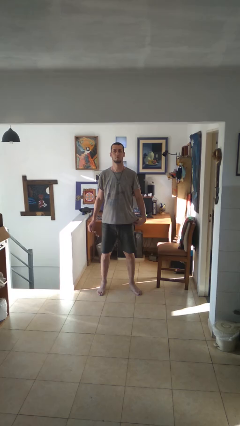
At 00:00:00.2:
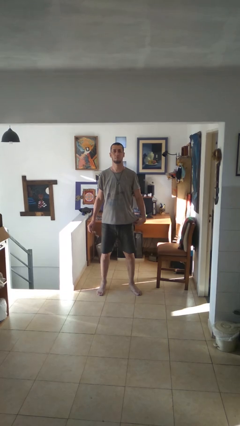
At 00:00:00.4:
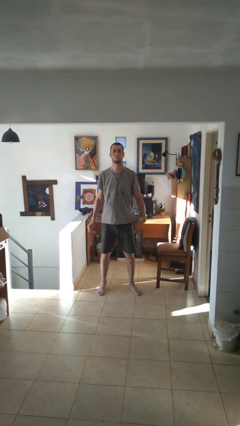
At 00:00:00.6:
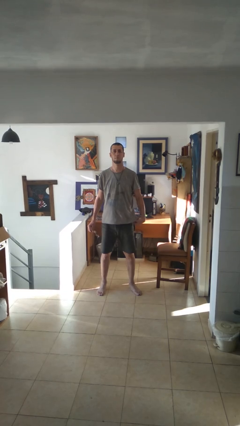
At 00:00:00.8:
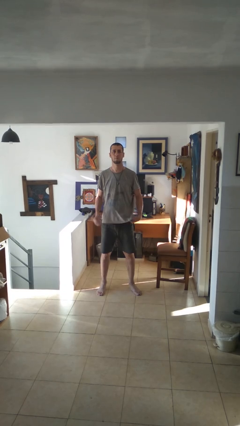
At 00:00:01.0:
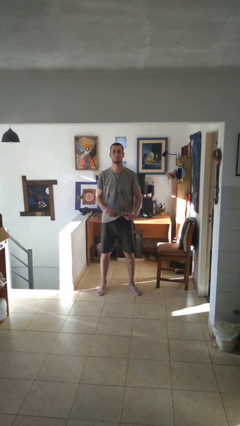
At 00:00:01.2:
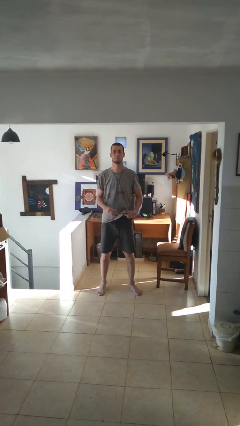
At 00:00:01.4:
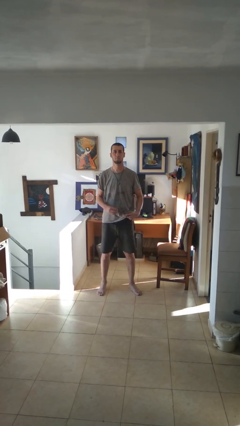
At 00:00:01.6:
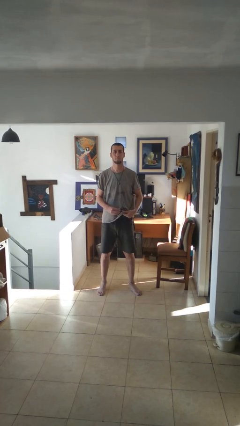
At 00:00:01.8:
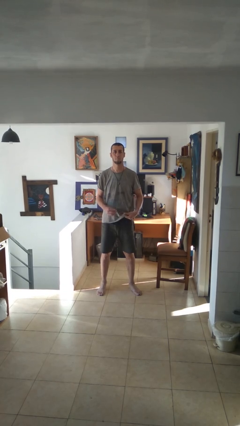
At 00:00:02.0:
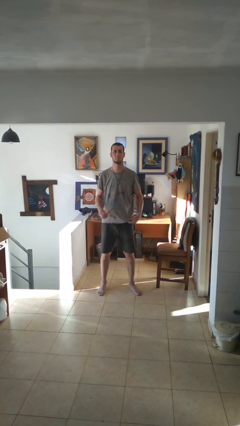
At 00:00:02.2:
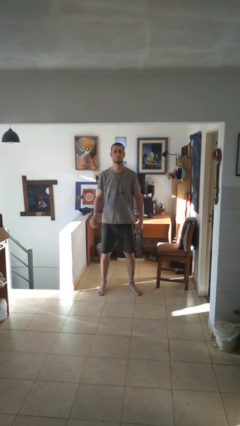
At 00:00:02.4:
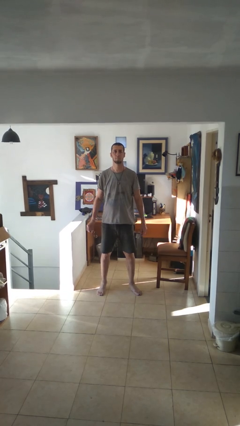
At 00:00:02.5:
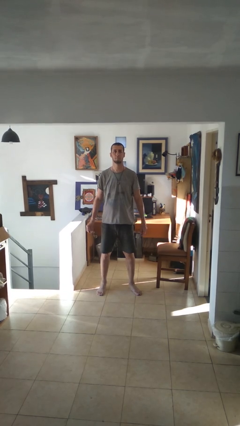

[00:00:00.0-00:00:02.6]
person cleans eyeglasses

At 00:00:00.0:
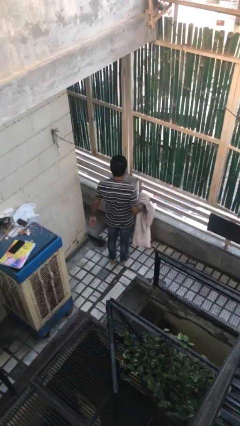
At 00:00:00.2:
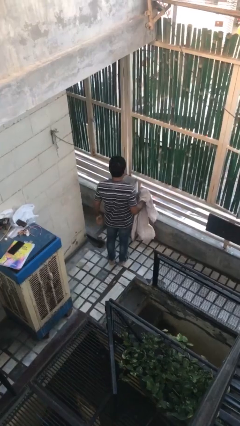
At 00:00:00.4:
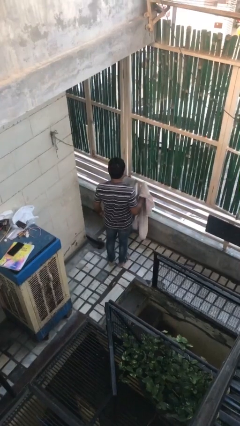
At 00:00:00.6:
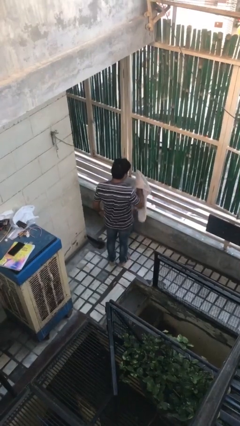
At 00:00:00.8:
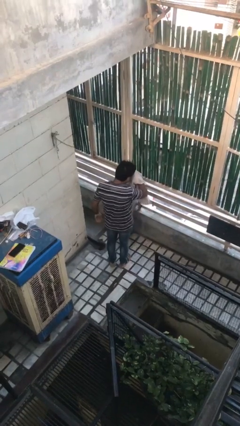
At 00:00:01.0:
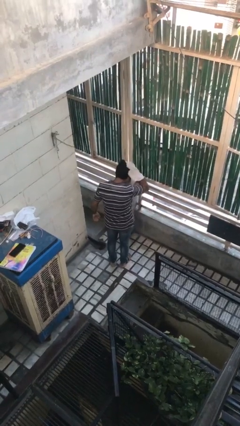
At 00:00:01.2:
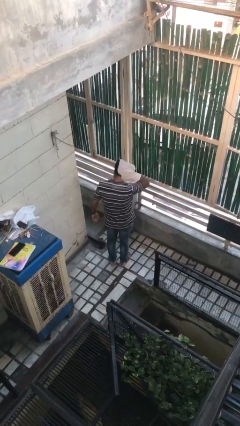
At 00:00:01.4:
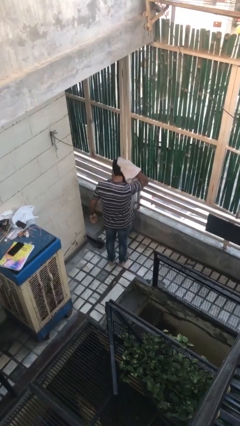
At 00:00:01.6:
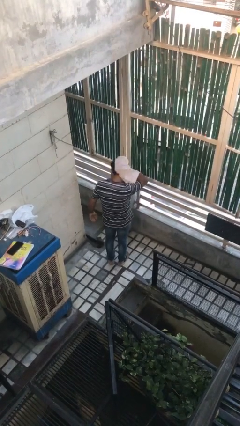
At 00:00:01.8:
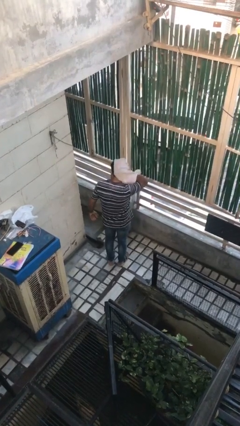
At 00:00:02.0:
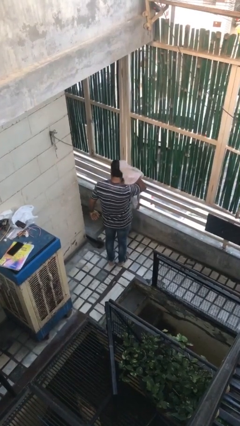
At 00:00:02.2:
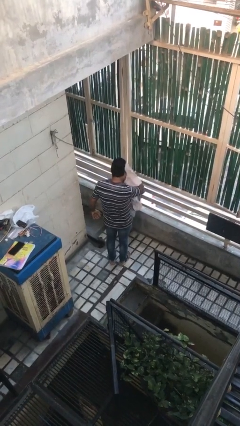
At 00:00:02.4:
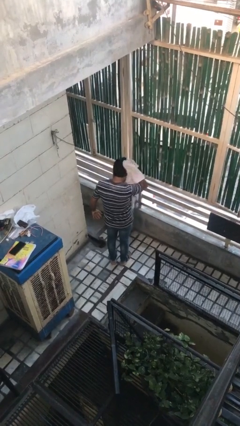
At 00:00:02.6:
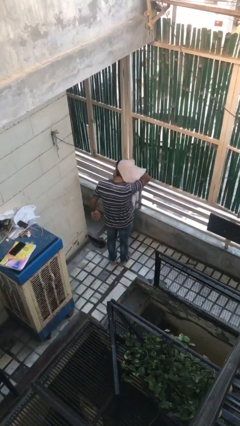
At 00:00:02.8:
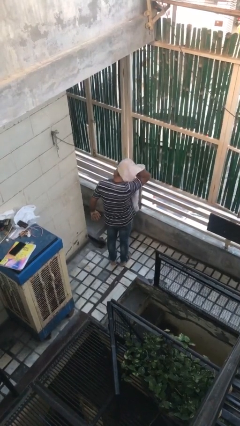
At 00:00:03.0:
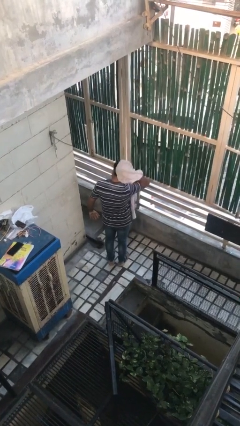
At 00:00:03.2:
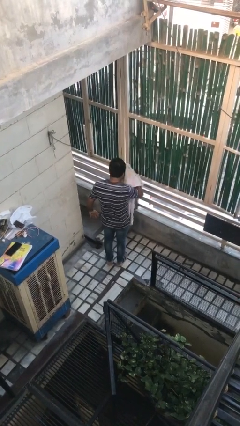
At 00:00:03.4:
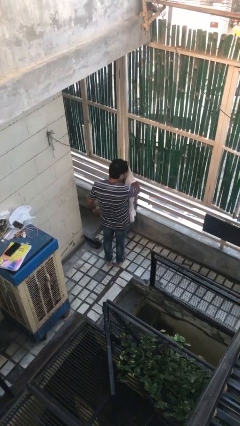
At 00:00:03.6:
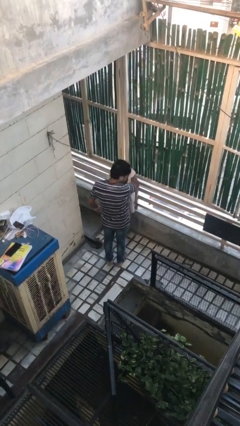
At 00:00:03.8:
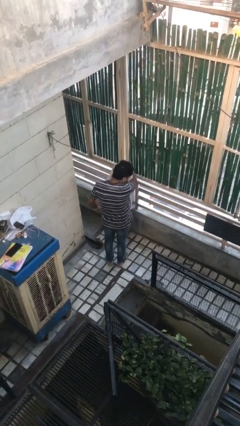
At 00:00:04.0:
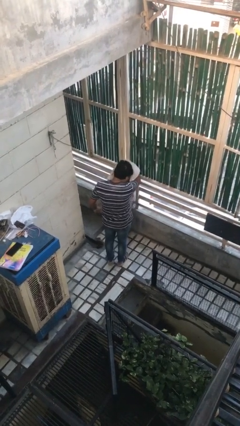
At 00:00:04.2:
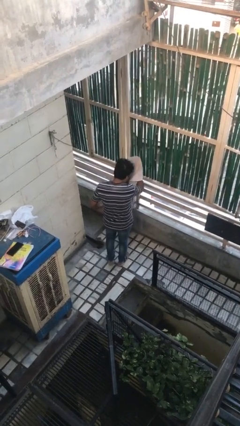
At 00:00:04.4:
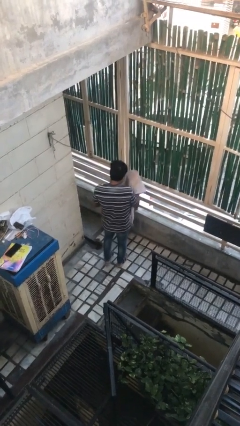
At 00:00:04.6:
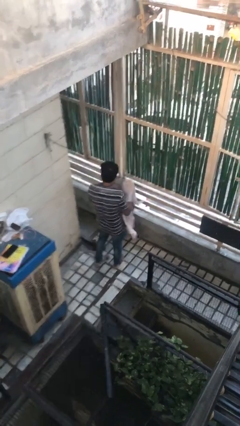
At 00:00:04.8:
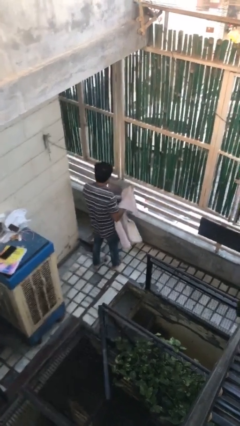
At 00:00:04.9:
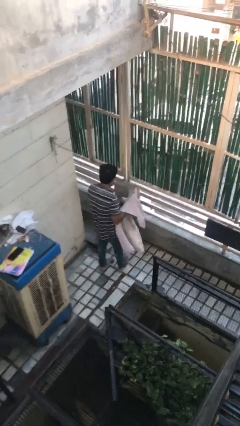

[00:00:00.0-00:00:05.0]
person dries hair with towel

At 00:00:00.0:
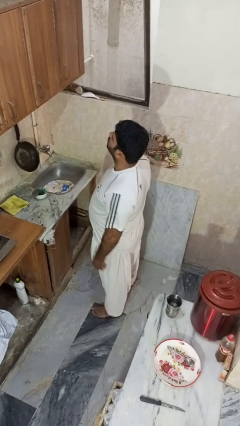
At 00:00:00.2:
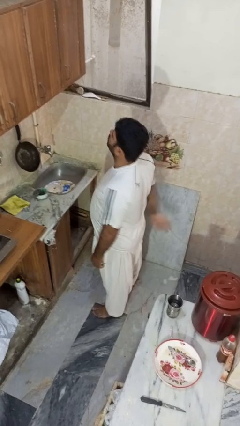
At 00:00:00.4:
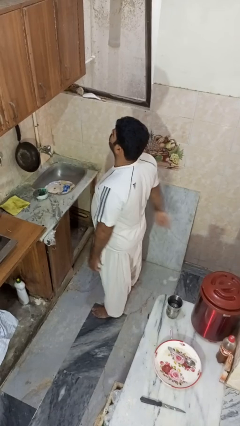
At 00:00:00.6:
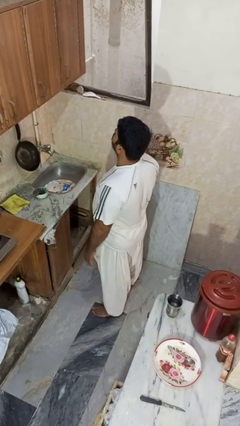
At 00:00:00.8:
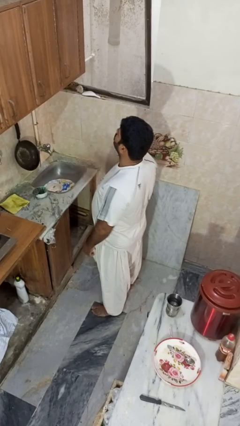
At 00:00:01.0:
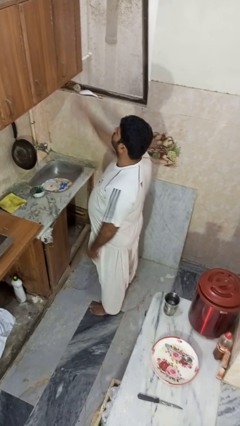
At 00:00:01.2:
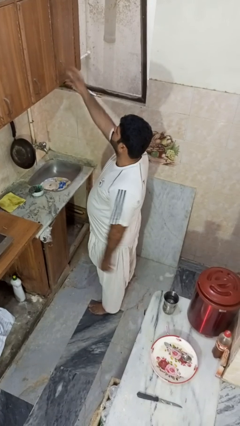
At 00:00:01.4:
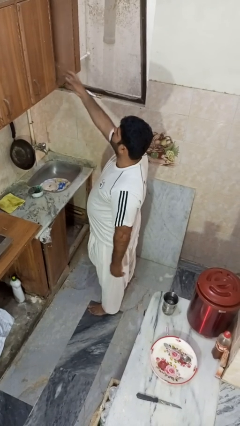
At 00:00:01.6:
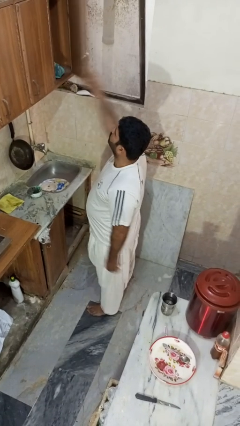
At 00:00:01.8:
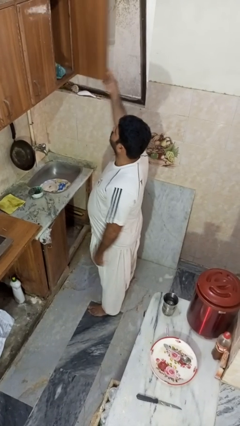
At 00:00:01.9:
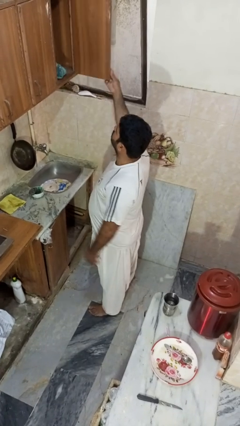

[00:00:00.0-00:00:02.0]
person opens cabinet

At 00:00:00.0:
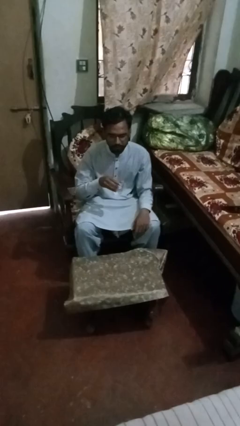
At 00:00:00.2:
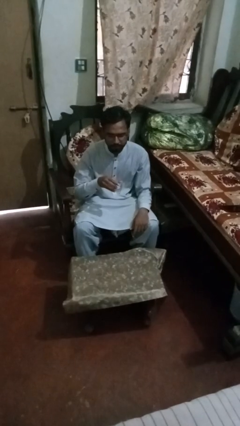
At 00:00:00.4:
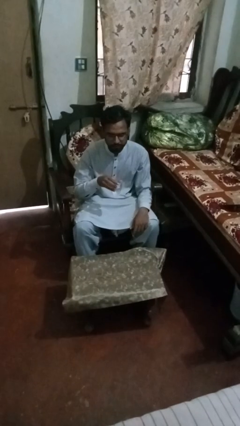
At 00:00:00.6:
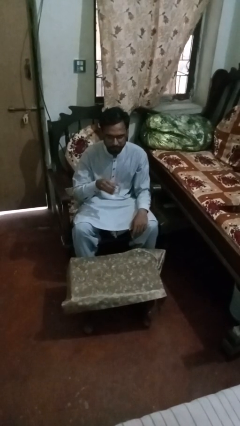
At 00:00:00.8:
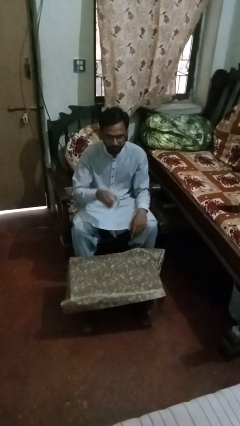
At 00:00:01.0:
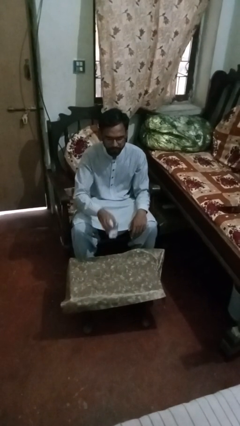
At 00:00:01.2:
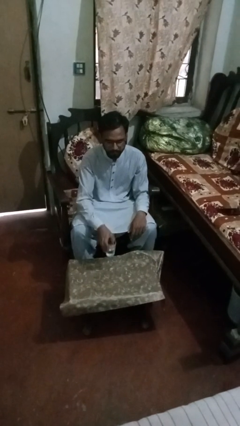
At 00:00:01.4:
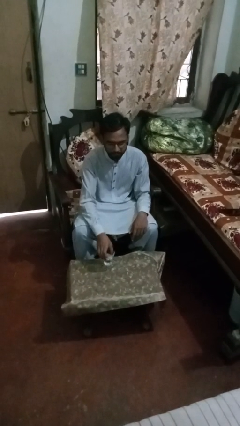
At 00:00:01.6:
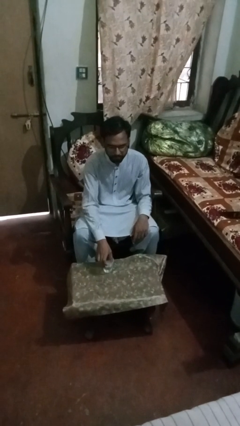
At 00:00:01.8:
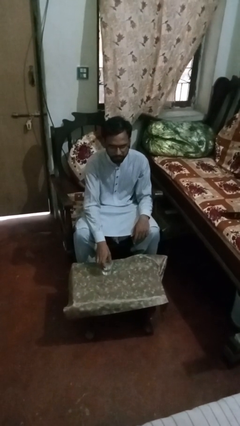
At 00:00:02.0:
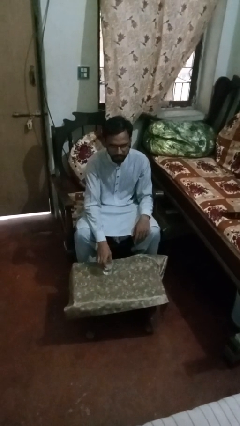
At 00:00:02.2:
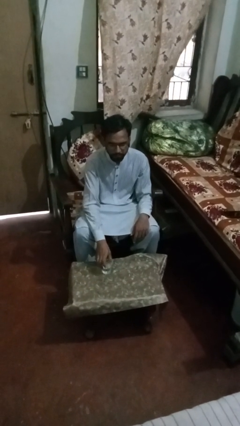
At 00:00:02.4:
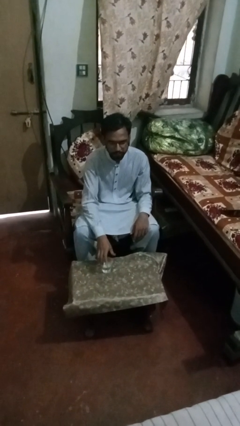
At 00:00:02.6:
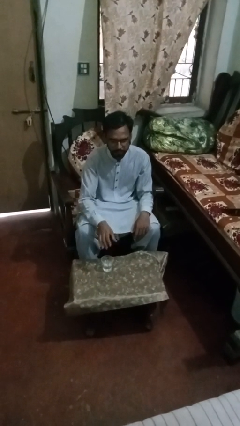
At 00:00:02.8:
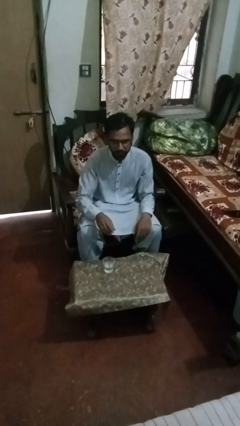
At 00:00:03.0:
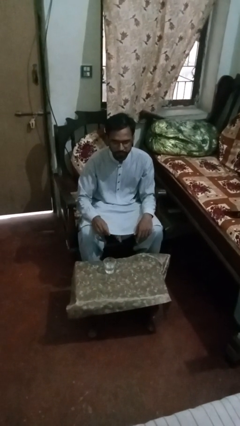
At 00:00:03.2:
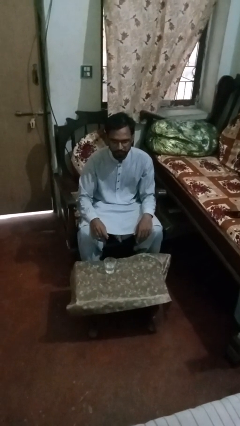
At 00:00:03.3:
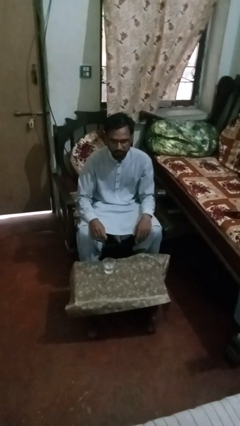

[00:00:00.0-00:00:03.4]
person puts down object on table

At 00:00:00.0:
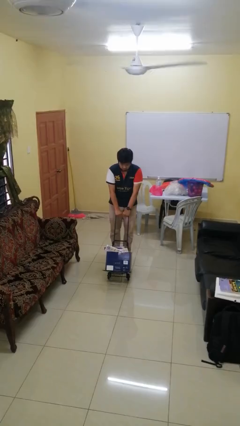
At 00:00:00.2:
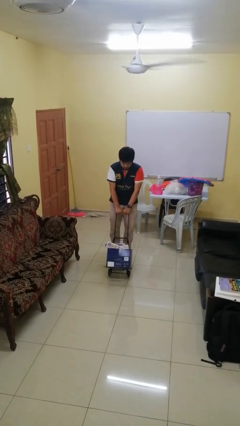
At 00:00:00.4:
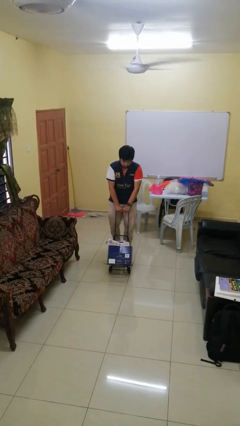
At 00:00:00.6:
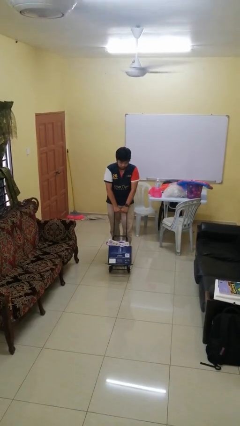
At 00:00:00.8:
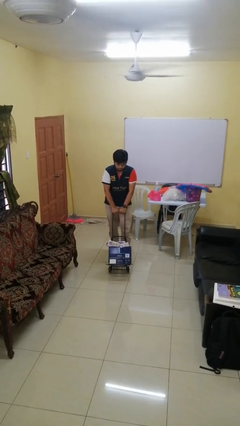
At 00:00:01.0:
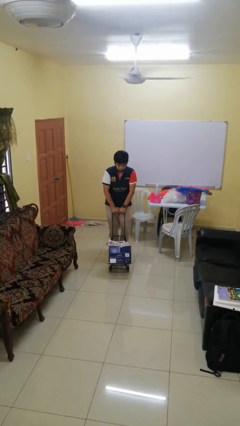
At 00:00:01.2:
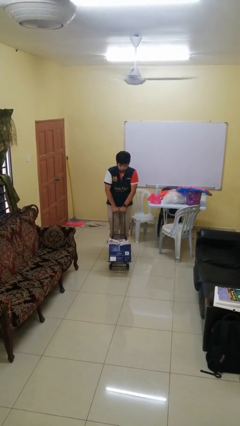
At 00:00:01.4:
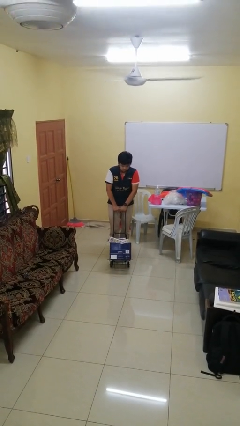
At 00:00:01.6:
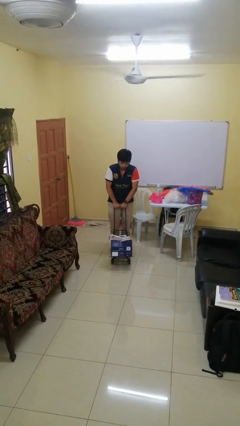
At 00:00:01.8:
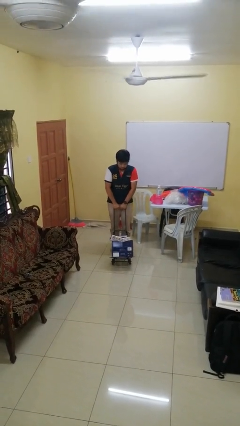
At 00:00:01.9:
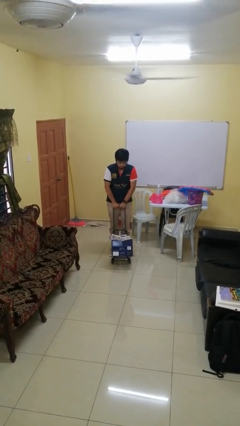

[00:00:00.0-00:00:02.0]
person pulls wheeled cart

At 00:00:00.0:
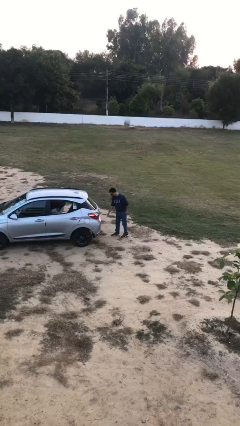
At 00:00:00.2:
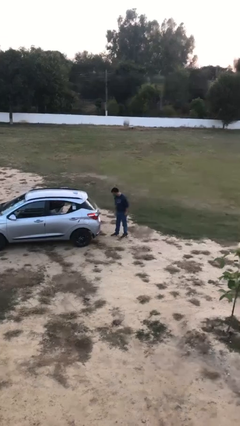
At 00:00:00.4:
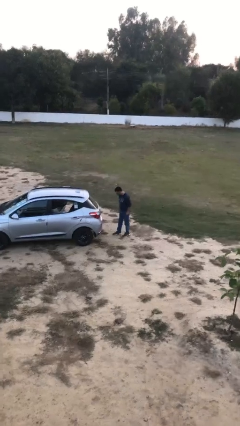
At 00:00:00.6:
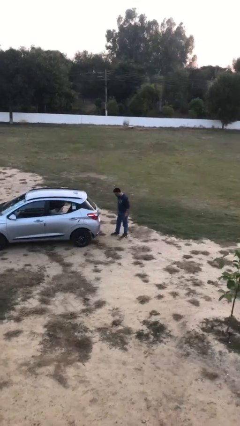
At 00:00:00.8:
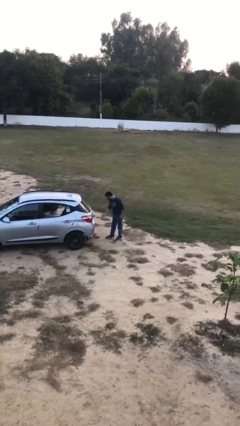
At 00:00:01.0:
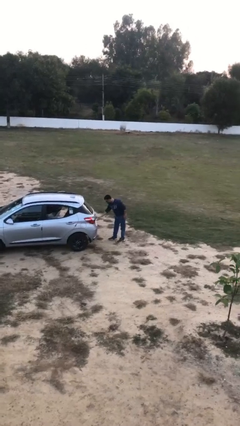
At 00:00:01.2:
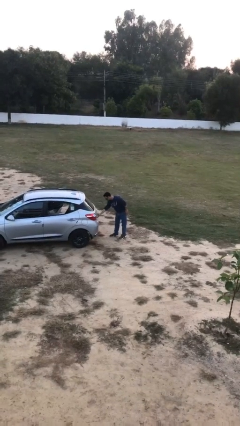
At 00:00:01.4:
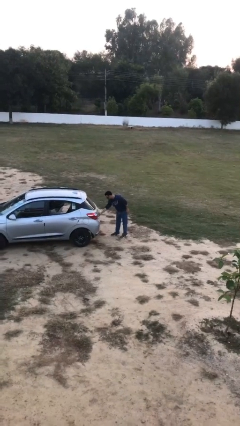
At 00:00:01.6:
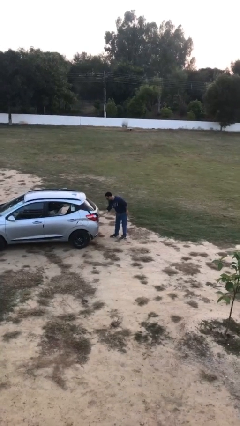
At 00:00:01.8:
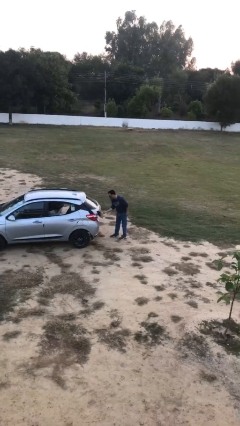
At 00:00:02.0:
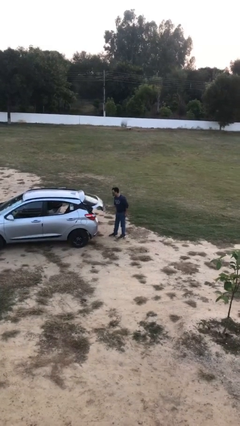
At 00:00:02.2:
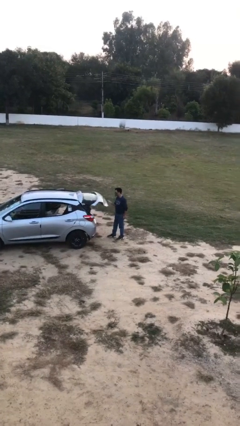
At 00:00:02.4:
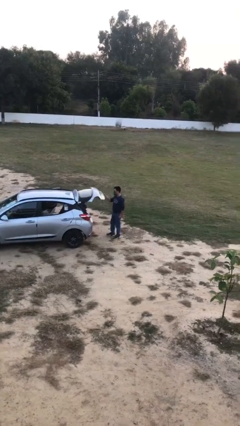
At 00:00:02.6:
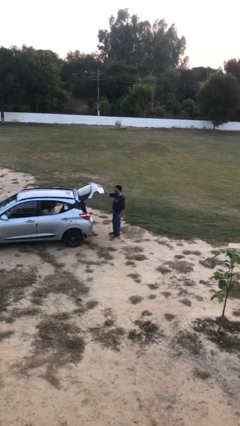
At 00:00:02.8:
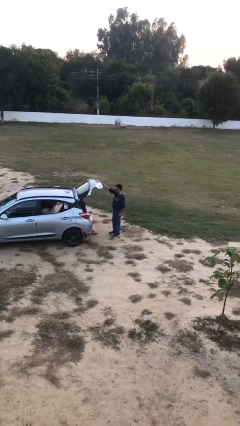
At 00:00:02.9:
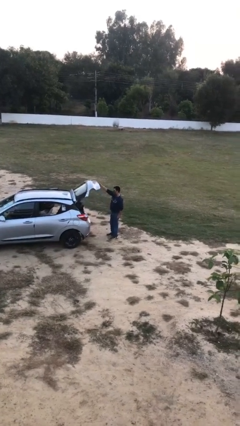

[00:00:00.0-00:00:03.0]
person opens car trunk
